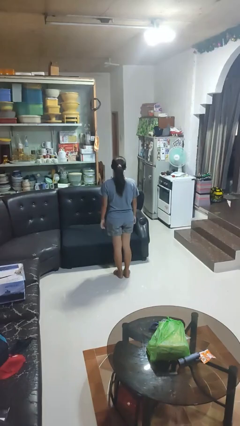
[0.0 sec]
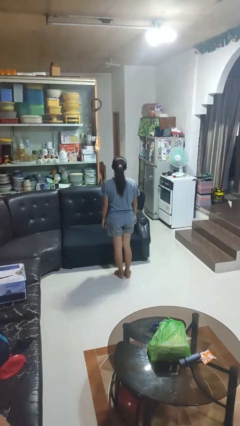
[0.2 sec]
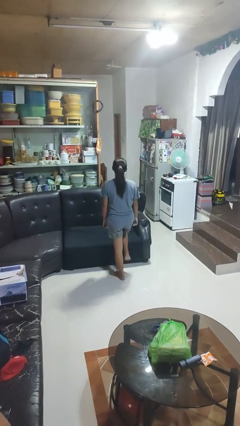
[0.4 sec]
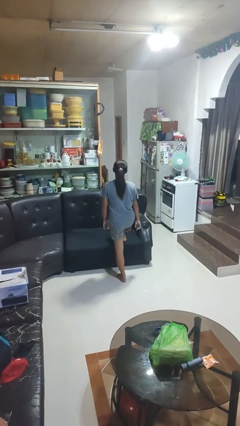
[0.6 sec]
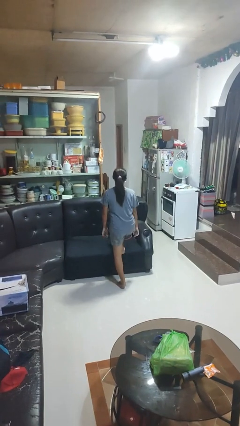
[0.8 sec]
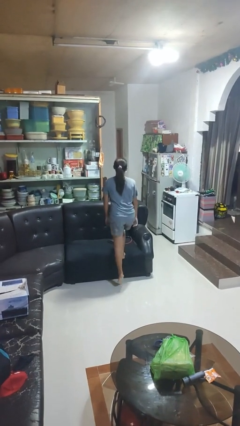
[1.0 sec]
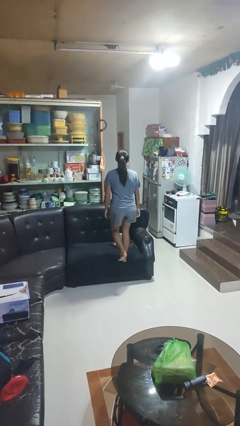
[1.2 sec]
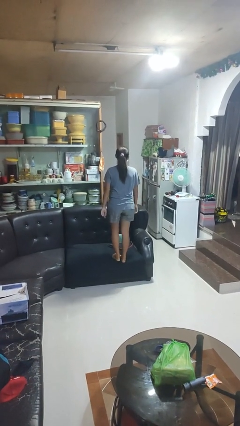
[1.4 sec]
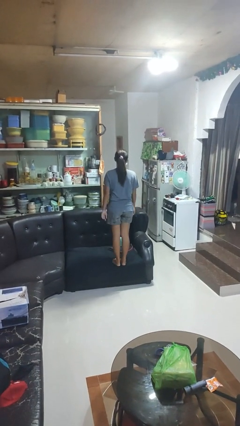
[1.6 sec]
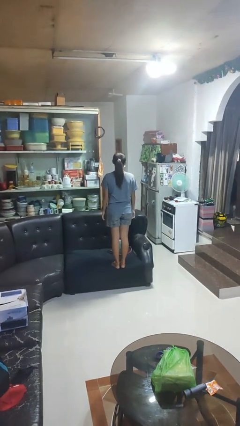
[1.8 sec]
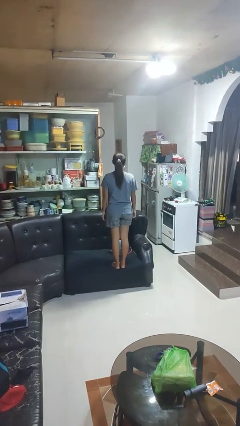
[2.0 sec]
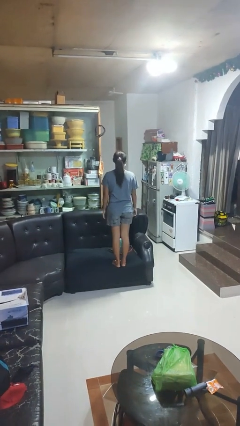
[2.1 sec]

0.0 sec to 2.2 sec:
person climbs on couch

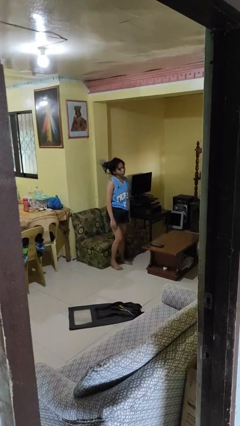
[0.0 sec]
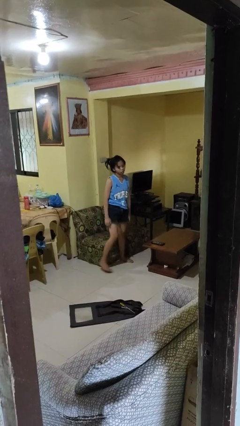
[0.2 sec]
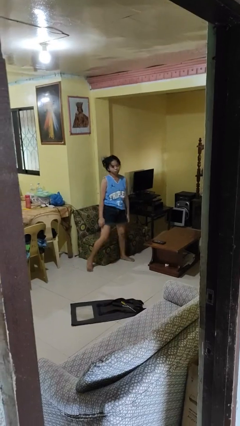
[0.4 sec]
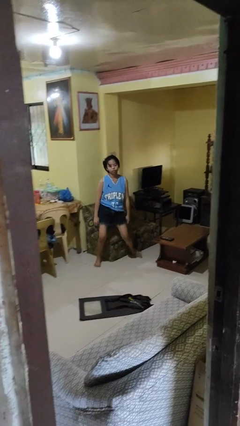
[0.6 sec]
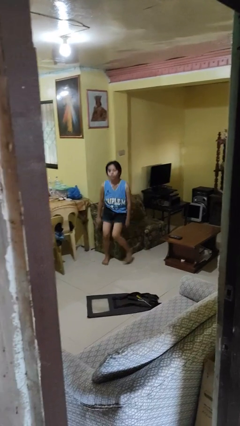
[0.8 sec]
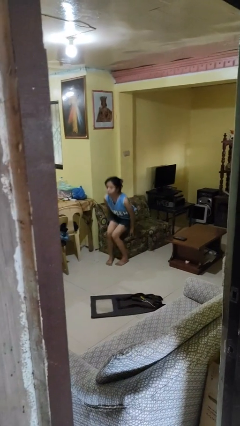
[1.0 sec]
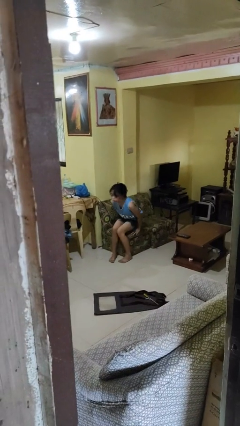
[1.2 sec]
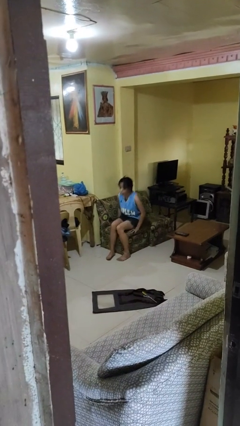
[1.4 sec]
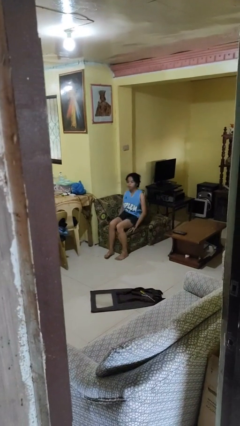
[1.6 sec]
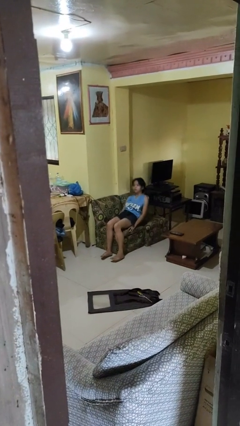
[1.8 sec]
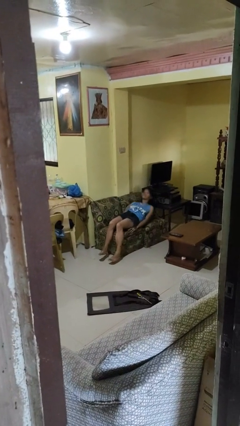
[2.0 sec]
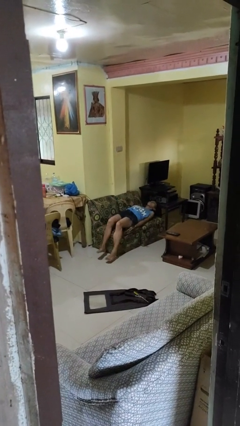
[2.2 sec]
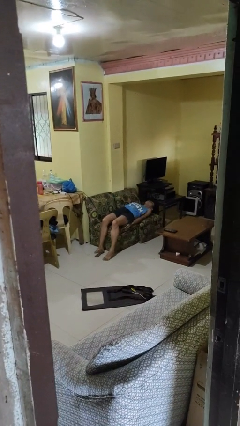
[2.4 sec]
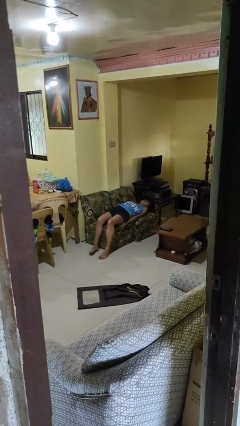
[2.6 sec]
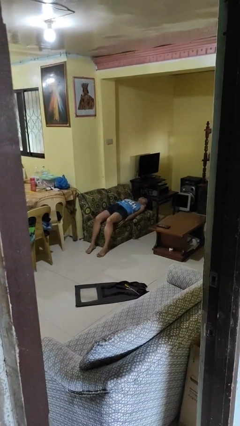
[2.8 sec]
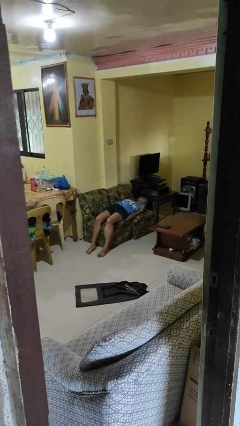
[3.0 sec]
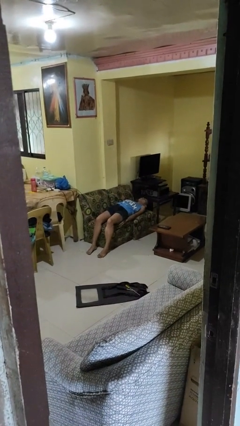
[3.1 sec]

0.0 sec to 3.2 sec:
person lies down on couch

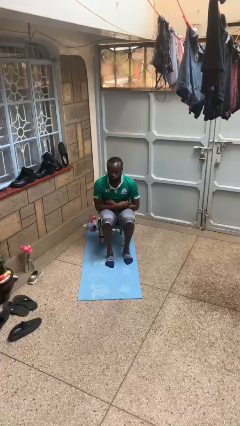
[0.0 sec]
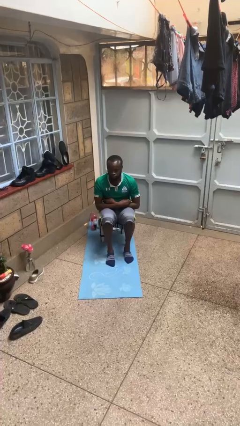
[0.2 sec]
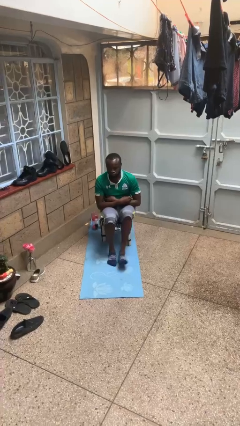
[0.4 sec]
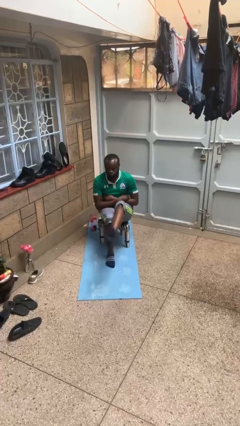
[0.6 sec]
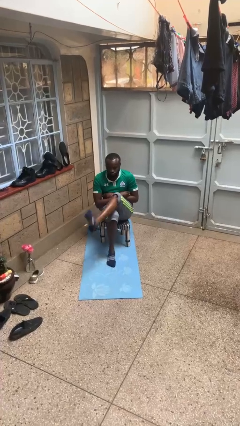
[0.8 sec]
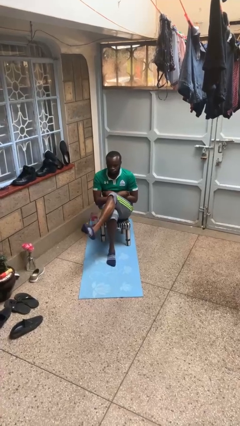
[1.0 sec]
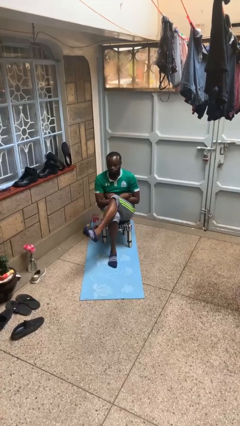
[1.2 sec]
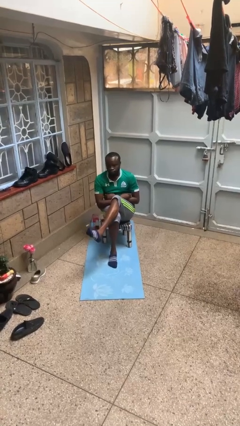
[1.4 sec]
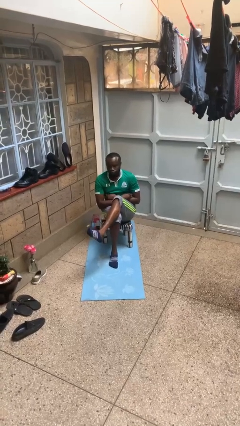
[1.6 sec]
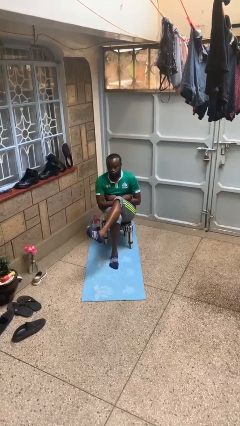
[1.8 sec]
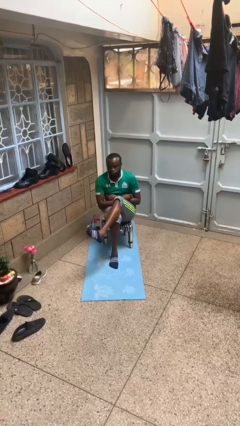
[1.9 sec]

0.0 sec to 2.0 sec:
person crosses legs

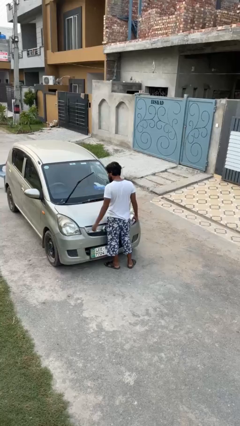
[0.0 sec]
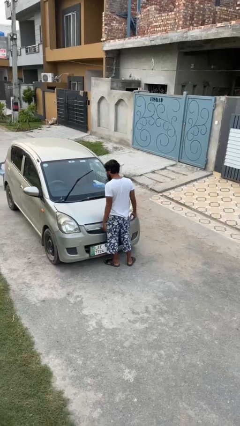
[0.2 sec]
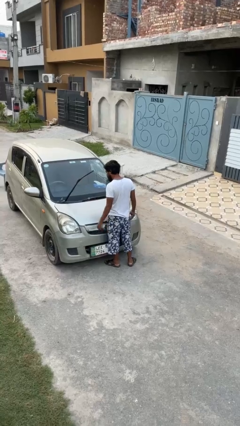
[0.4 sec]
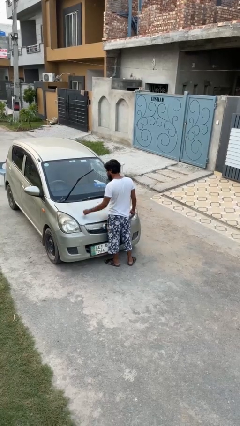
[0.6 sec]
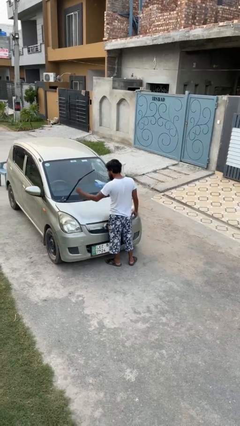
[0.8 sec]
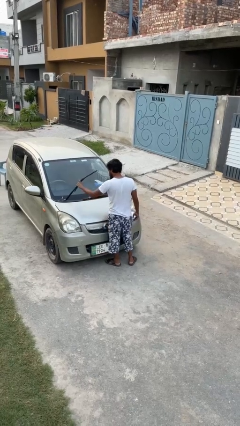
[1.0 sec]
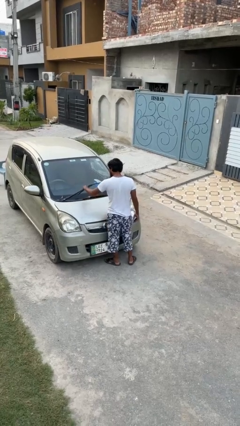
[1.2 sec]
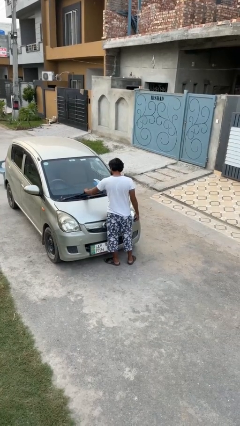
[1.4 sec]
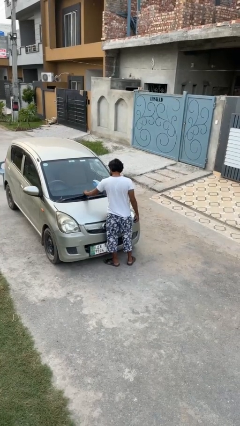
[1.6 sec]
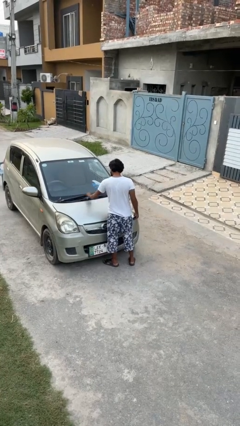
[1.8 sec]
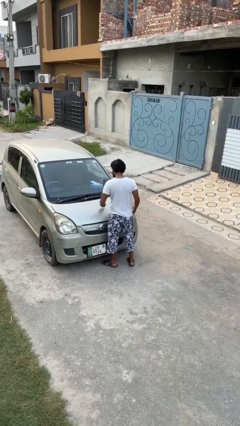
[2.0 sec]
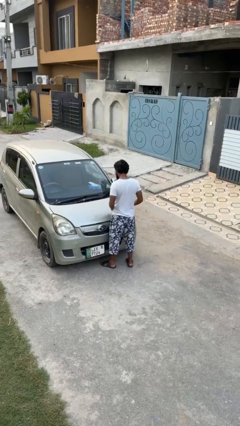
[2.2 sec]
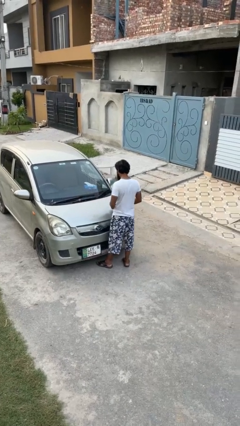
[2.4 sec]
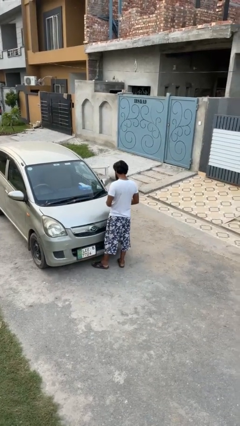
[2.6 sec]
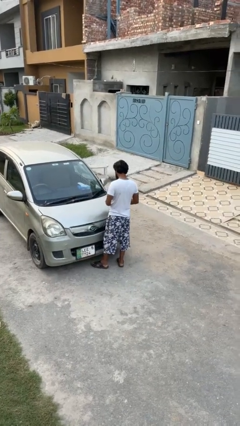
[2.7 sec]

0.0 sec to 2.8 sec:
person flips down car wipers

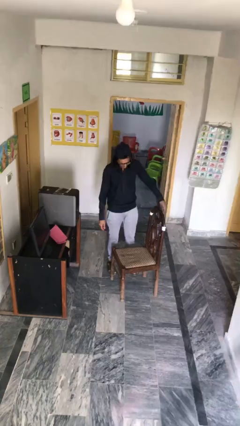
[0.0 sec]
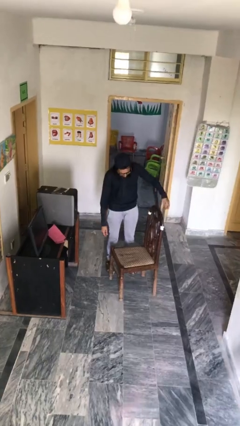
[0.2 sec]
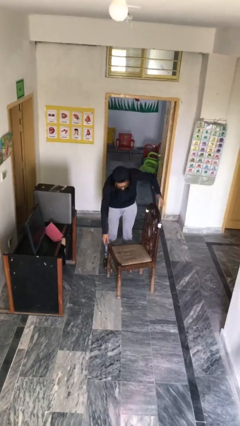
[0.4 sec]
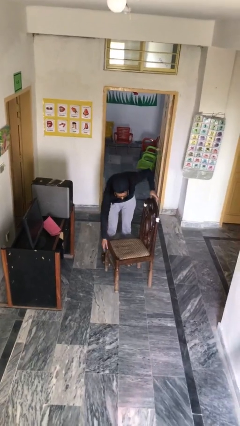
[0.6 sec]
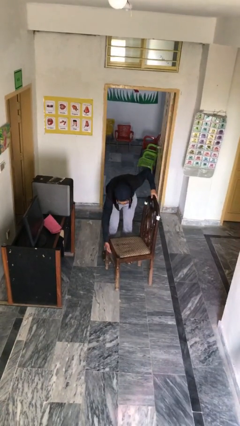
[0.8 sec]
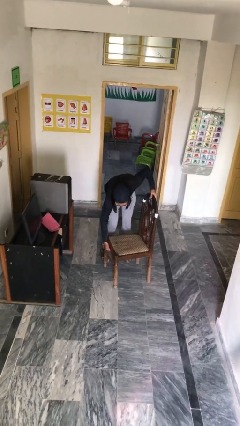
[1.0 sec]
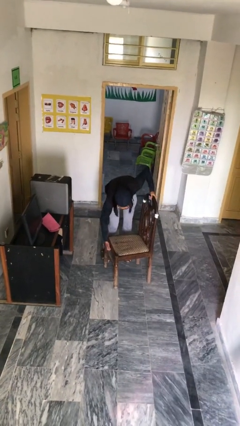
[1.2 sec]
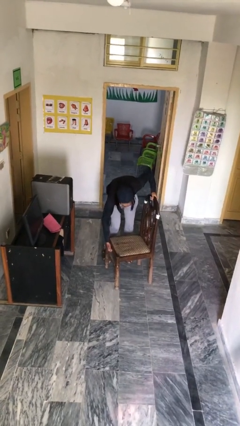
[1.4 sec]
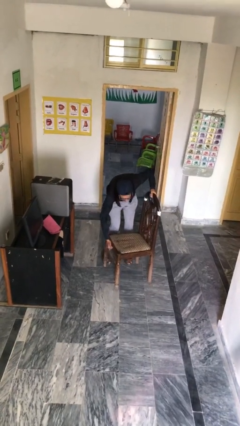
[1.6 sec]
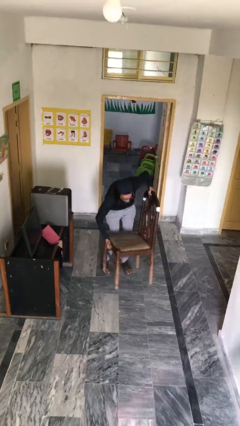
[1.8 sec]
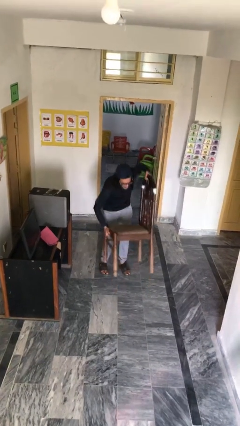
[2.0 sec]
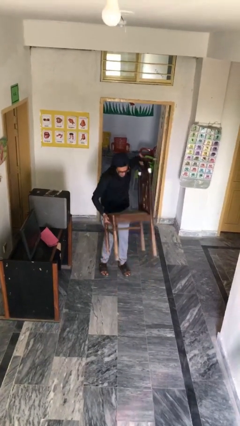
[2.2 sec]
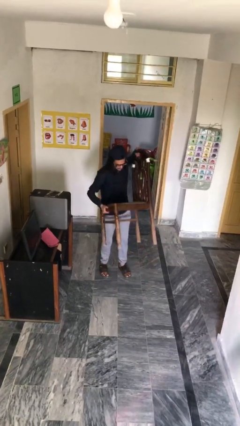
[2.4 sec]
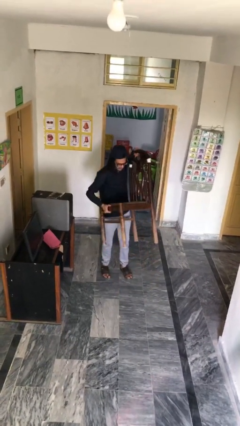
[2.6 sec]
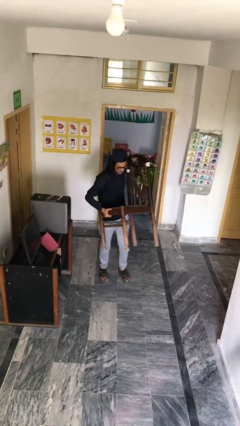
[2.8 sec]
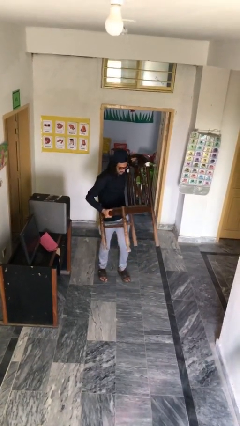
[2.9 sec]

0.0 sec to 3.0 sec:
person picks up object from floor

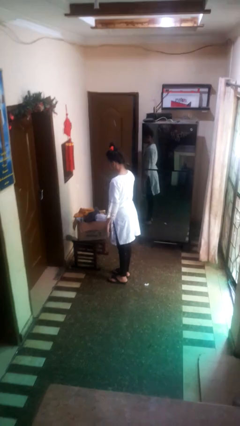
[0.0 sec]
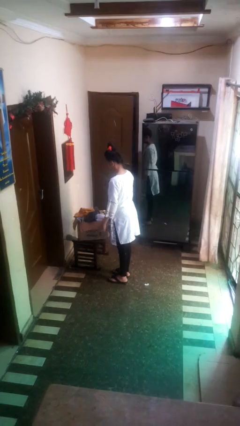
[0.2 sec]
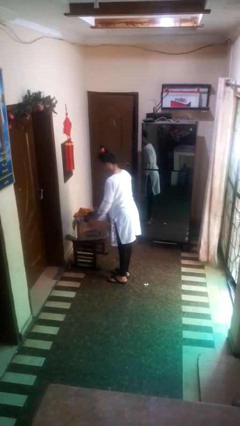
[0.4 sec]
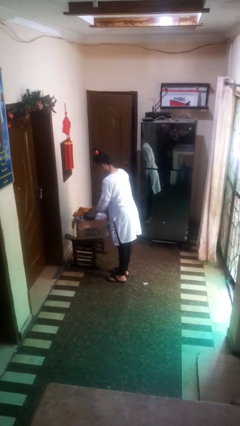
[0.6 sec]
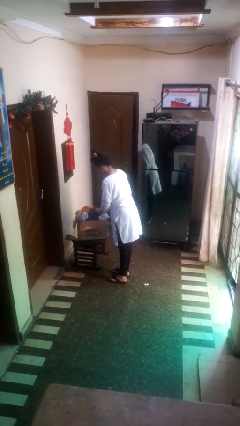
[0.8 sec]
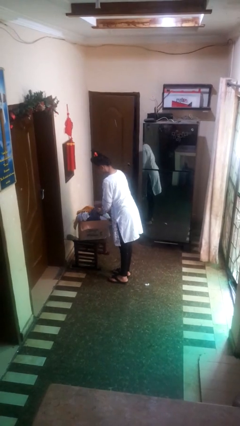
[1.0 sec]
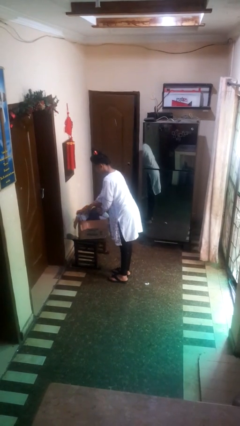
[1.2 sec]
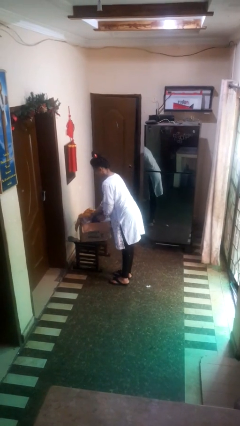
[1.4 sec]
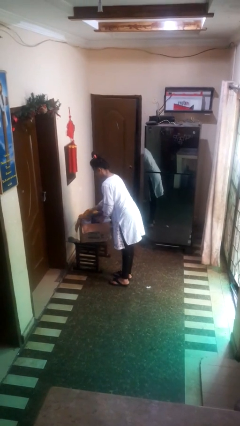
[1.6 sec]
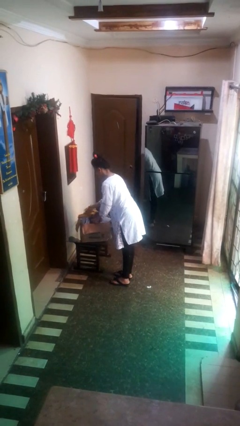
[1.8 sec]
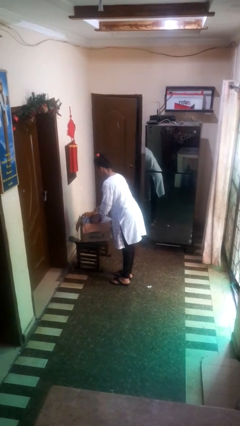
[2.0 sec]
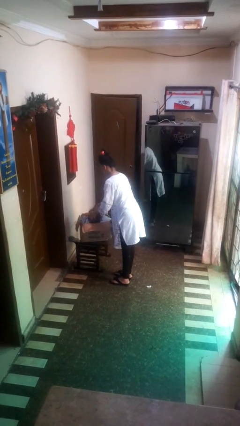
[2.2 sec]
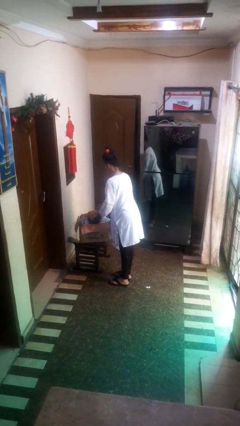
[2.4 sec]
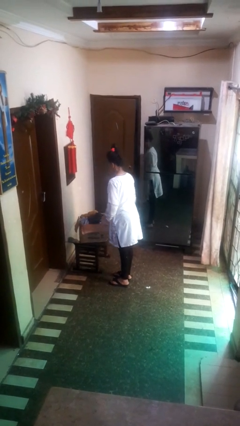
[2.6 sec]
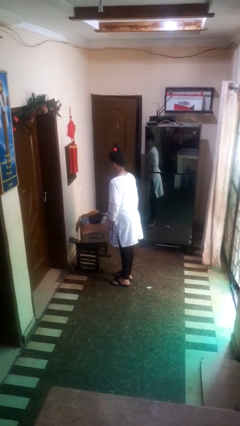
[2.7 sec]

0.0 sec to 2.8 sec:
person searches in box

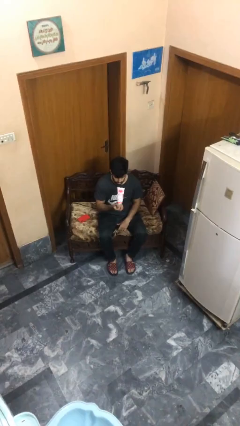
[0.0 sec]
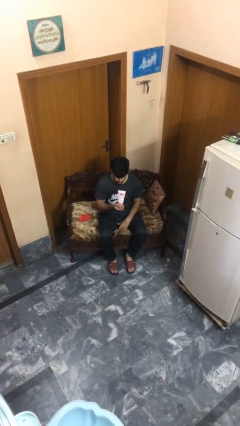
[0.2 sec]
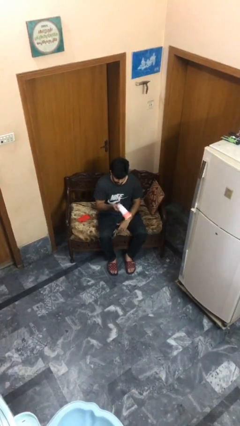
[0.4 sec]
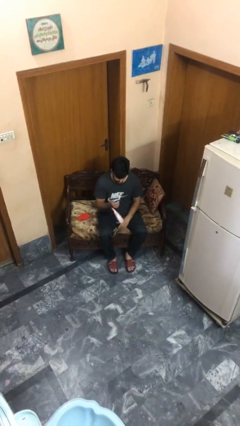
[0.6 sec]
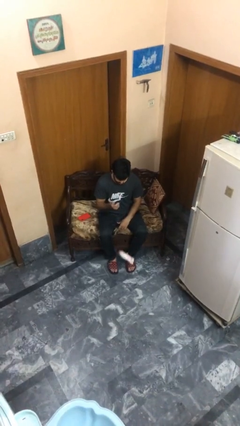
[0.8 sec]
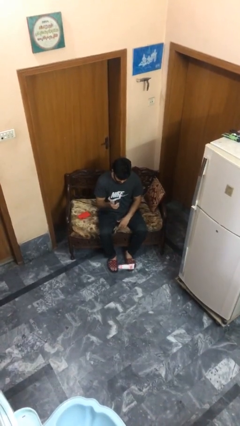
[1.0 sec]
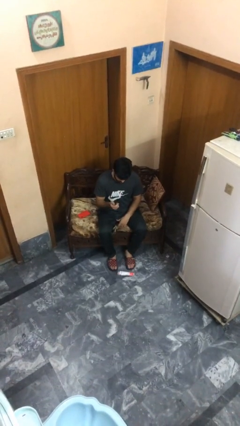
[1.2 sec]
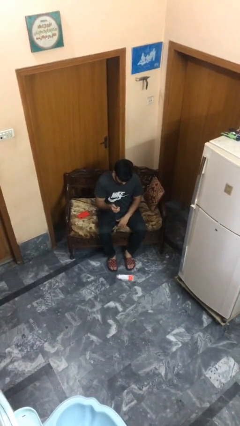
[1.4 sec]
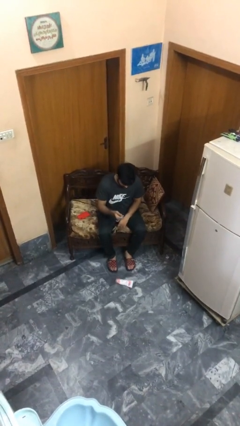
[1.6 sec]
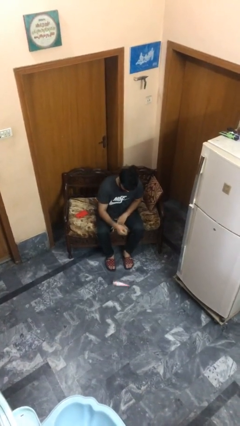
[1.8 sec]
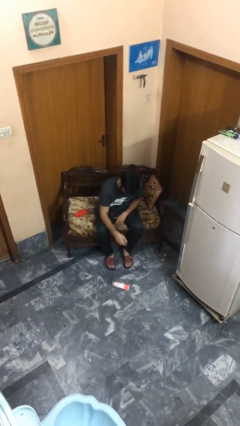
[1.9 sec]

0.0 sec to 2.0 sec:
person drops object
